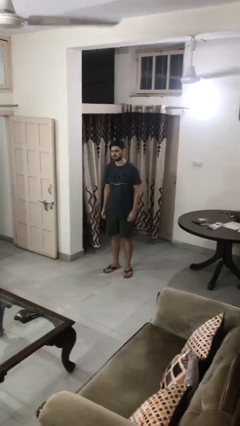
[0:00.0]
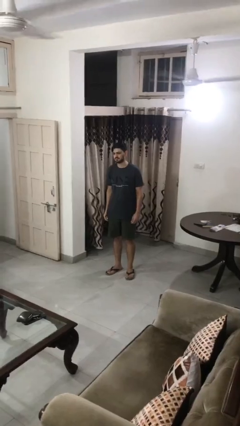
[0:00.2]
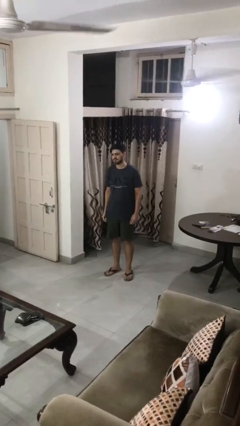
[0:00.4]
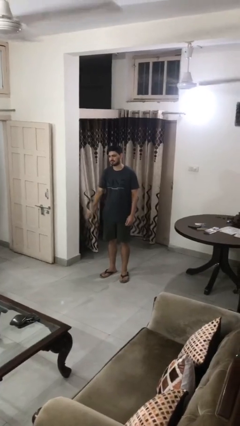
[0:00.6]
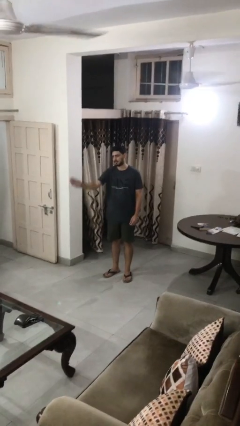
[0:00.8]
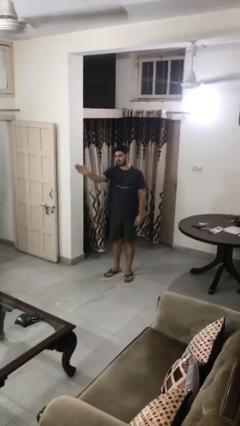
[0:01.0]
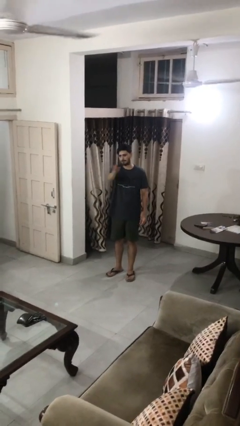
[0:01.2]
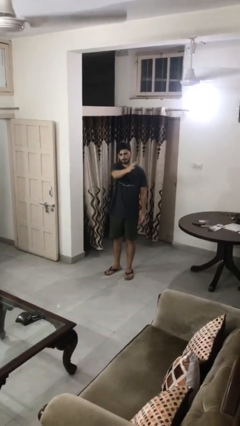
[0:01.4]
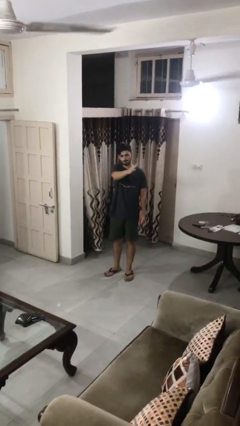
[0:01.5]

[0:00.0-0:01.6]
person gestures swipe left

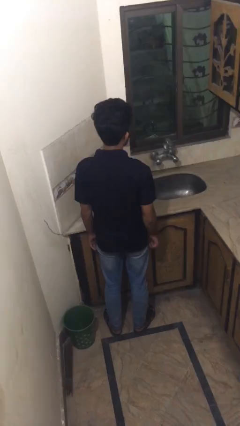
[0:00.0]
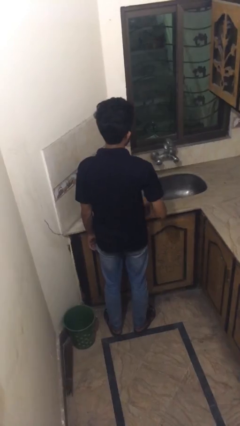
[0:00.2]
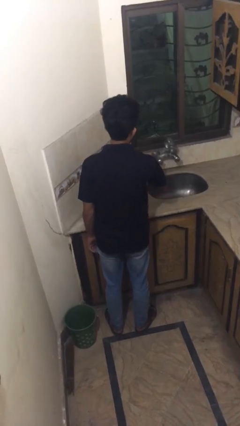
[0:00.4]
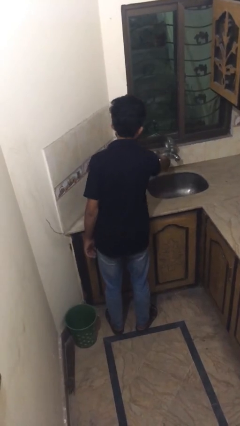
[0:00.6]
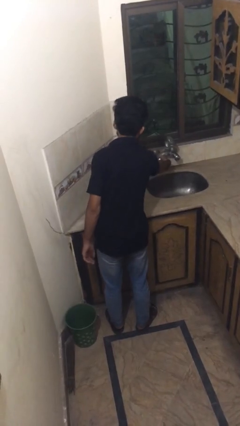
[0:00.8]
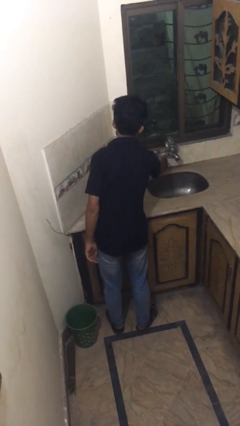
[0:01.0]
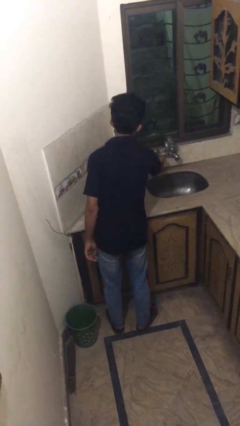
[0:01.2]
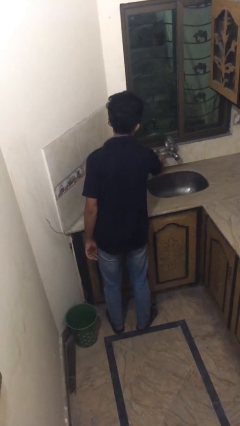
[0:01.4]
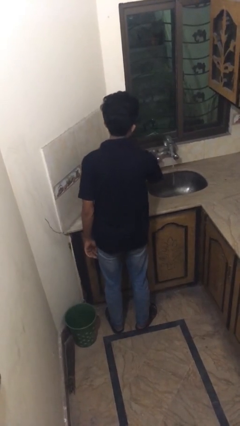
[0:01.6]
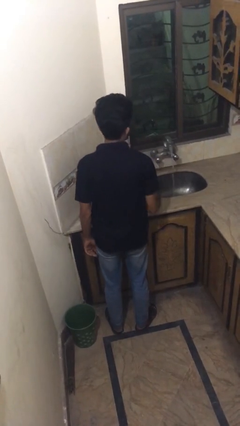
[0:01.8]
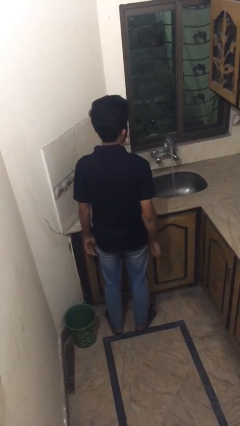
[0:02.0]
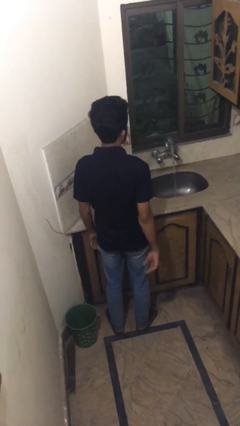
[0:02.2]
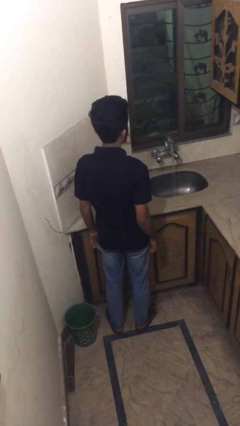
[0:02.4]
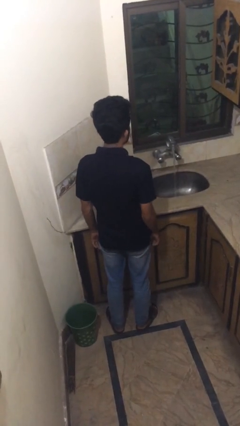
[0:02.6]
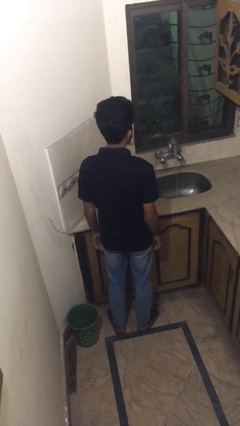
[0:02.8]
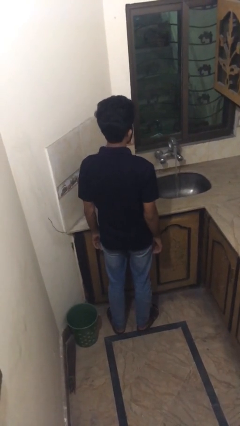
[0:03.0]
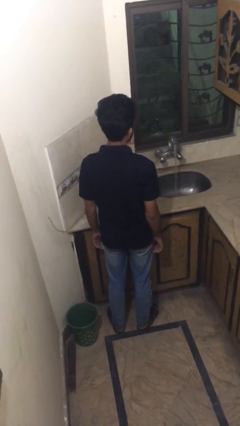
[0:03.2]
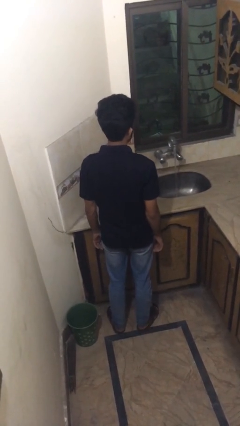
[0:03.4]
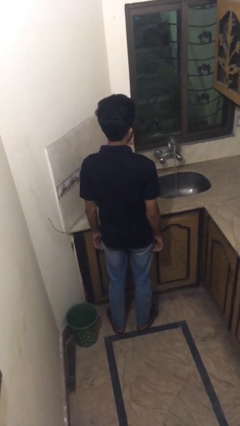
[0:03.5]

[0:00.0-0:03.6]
person turns on faucet

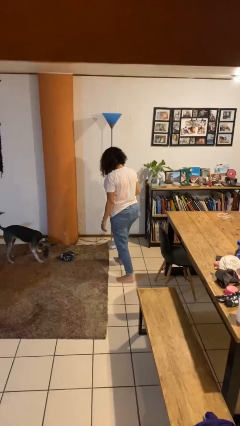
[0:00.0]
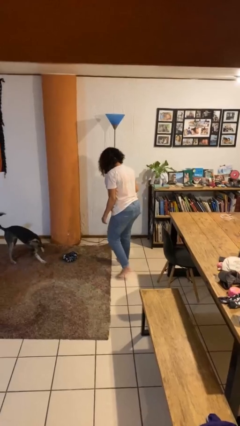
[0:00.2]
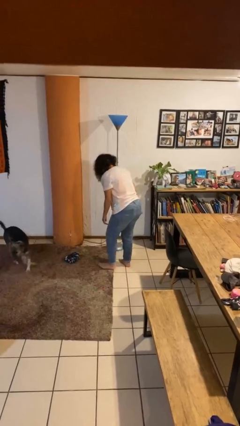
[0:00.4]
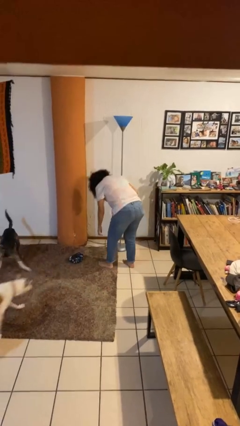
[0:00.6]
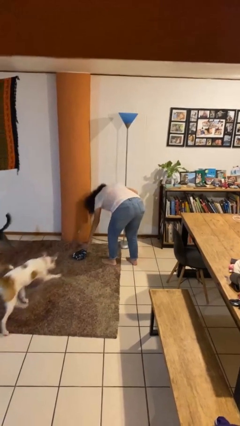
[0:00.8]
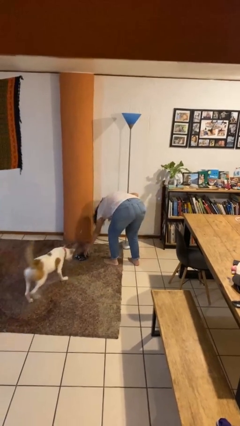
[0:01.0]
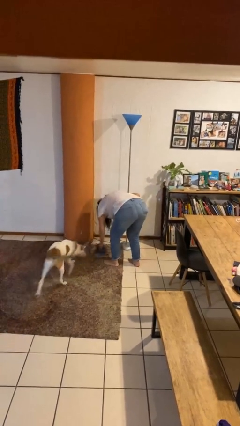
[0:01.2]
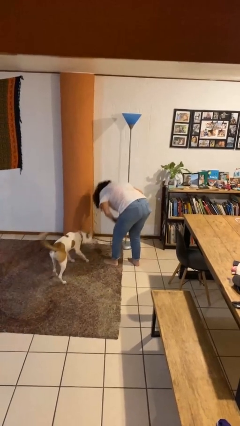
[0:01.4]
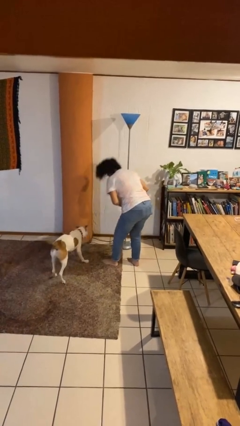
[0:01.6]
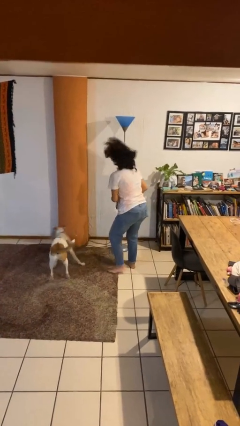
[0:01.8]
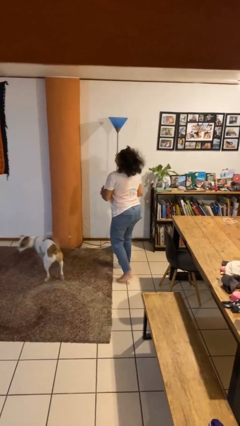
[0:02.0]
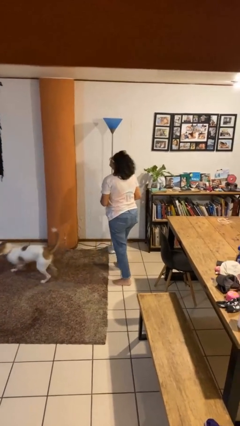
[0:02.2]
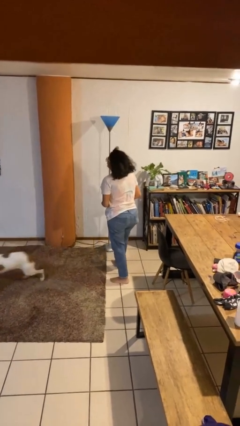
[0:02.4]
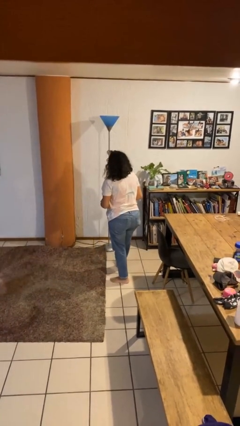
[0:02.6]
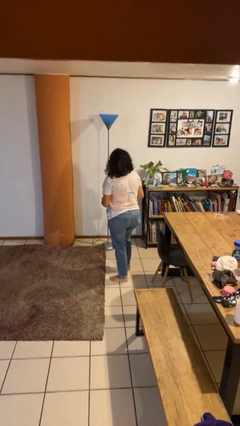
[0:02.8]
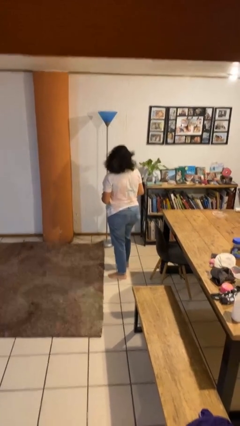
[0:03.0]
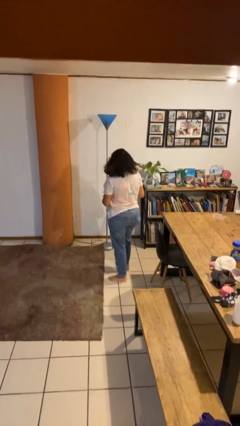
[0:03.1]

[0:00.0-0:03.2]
person picks up object from floor

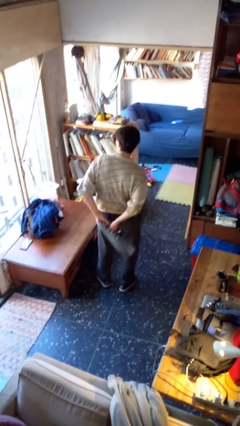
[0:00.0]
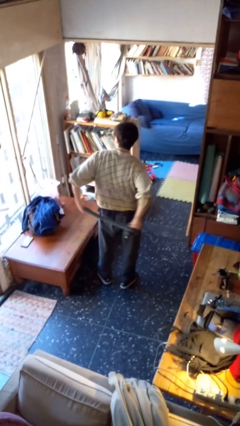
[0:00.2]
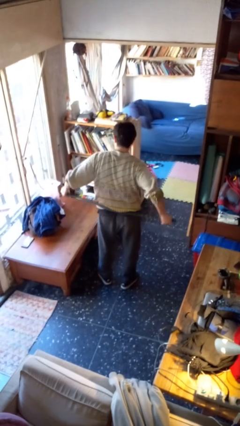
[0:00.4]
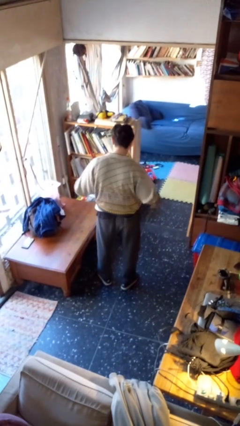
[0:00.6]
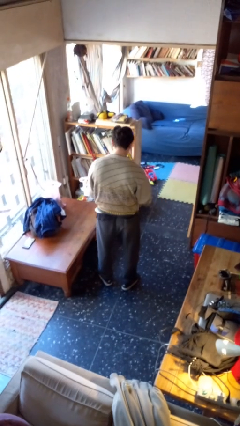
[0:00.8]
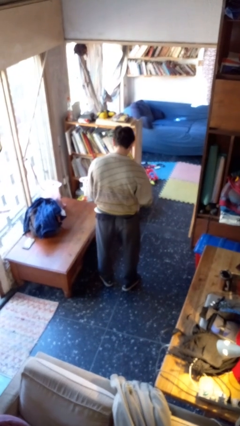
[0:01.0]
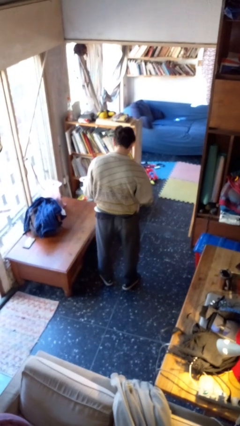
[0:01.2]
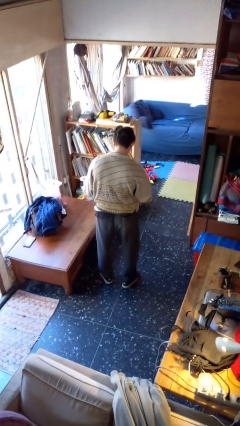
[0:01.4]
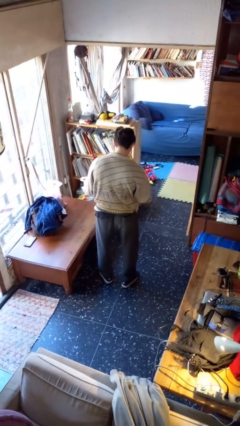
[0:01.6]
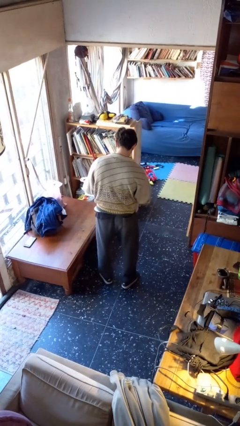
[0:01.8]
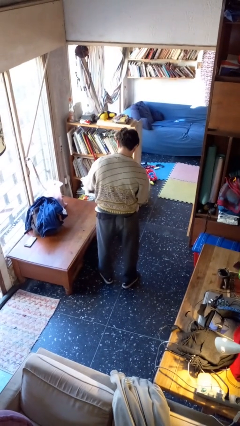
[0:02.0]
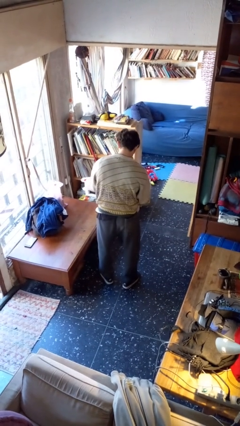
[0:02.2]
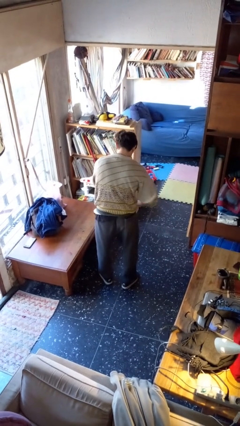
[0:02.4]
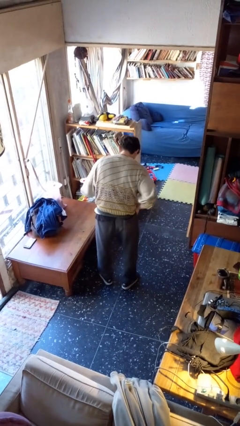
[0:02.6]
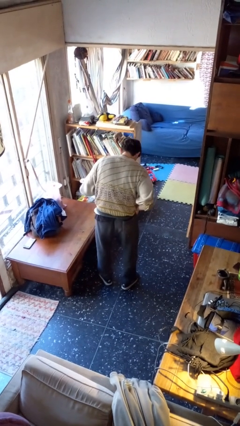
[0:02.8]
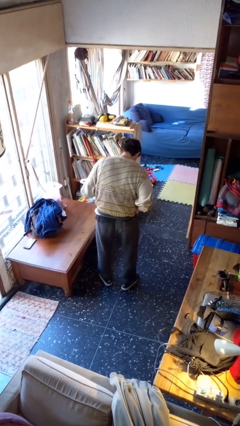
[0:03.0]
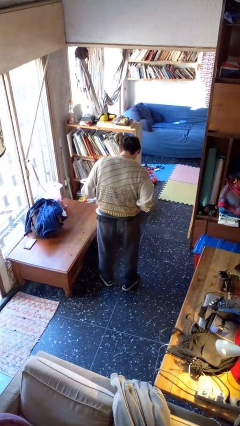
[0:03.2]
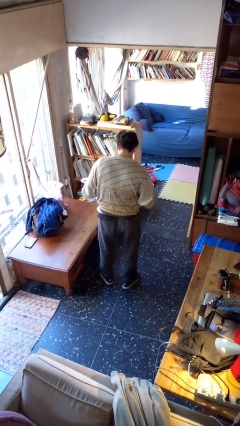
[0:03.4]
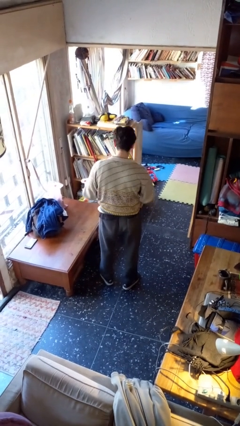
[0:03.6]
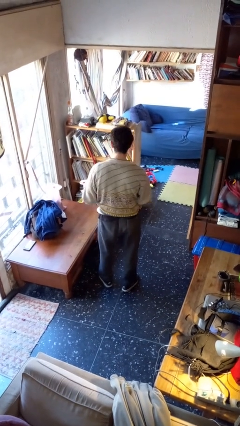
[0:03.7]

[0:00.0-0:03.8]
person puts on belt

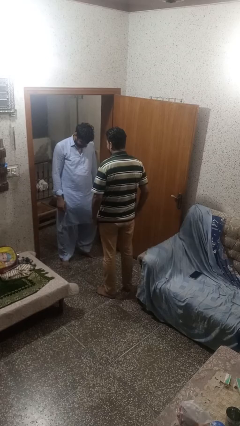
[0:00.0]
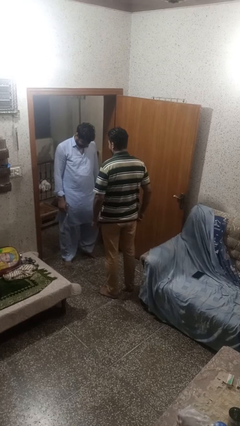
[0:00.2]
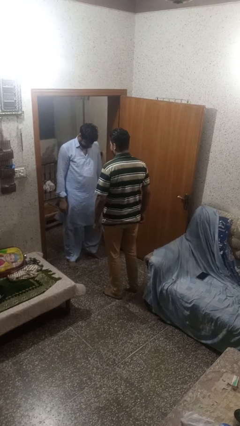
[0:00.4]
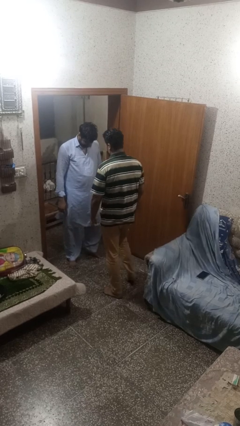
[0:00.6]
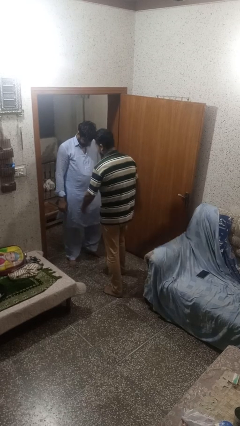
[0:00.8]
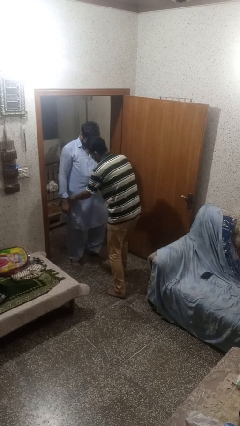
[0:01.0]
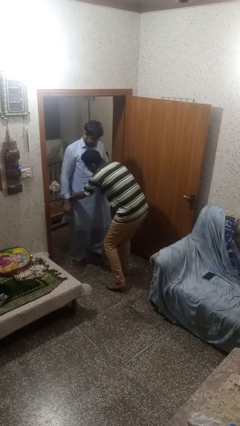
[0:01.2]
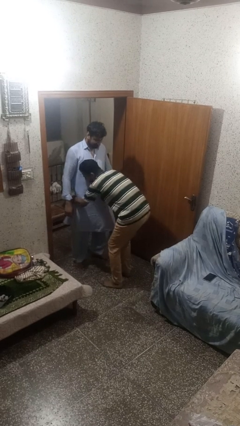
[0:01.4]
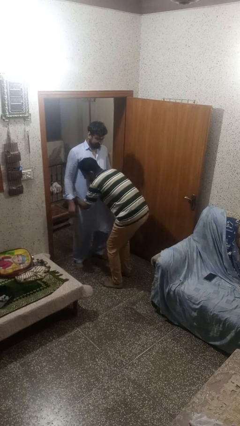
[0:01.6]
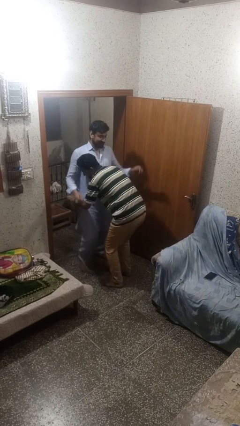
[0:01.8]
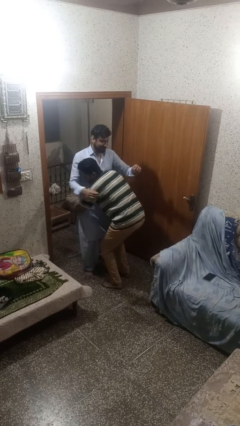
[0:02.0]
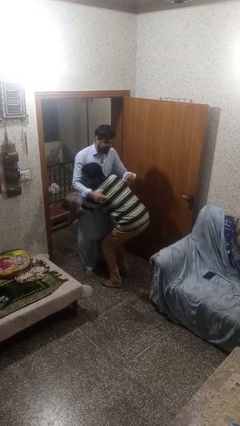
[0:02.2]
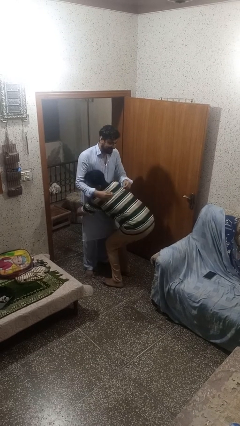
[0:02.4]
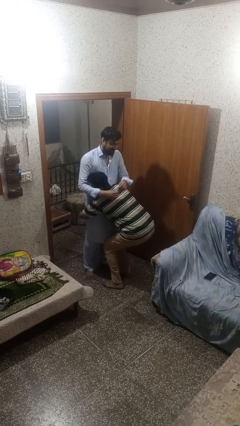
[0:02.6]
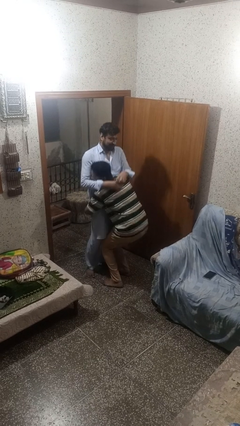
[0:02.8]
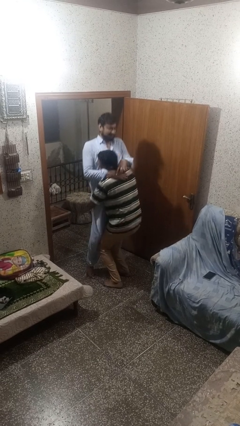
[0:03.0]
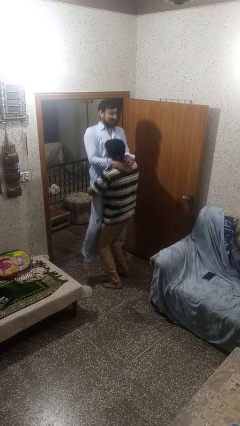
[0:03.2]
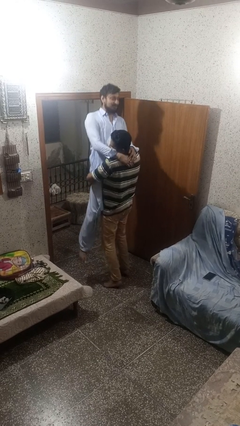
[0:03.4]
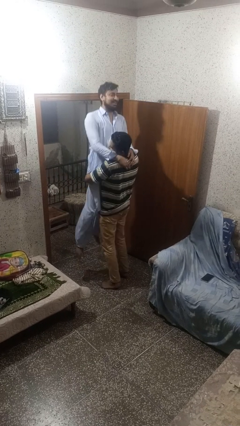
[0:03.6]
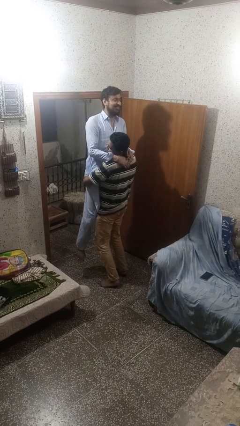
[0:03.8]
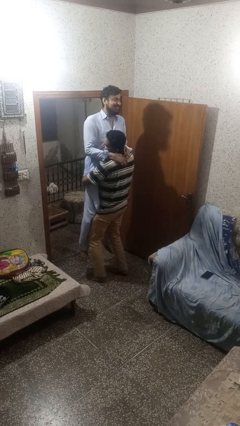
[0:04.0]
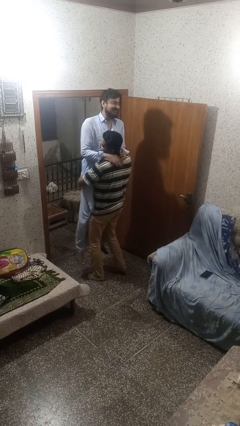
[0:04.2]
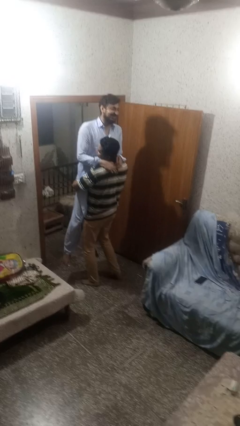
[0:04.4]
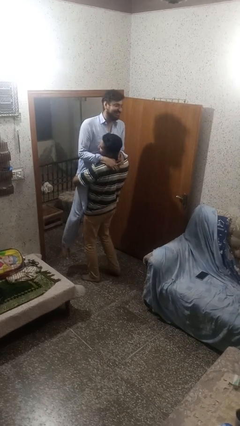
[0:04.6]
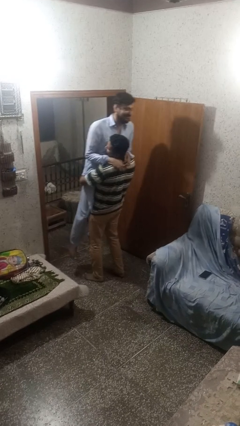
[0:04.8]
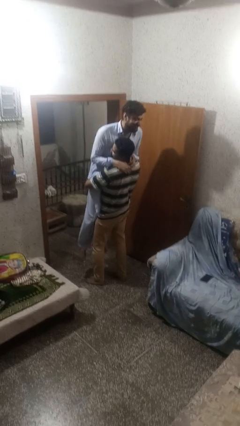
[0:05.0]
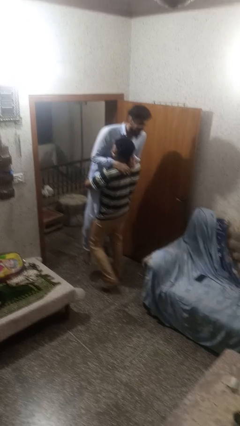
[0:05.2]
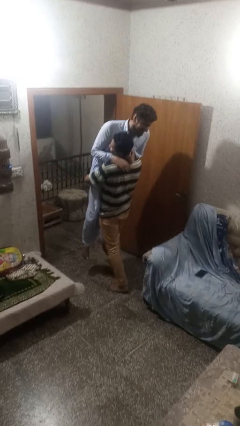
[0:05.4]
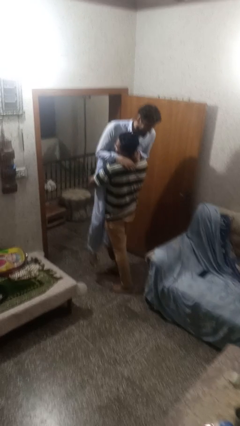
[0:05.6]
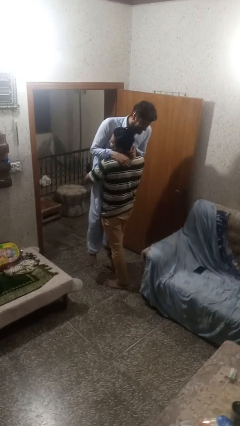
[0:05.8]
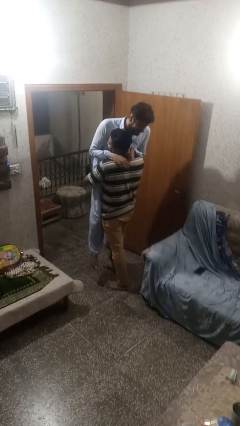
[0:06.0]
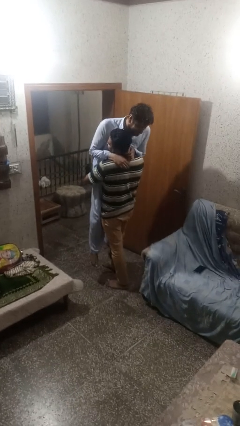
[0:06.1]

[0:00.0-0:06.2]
person picks up person
